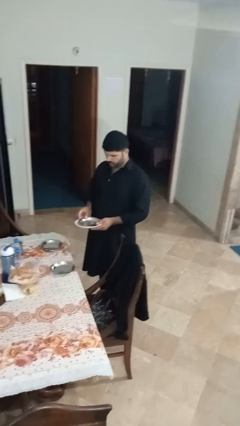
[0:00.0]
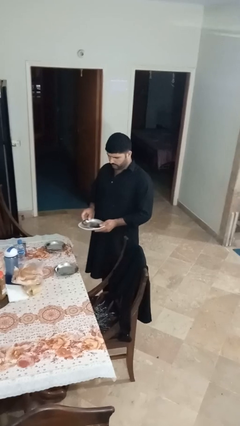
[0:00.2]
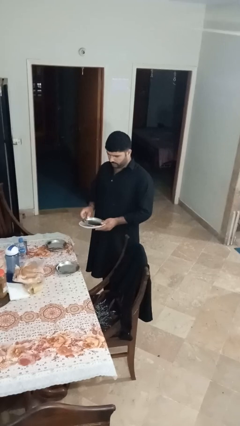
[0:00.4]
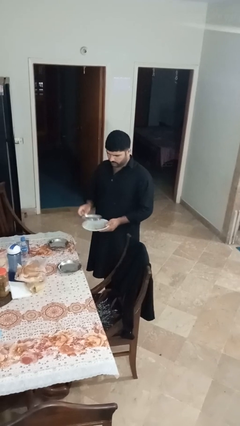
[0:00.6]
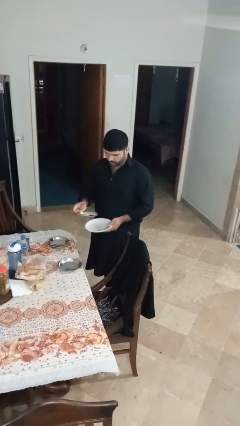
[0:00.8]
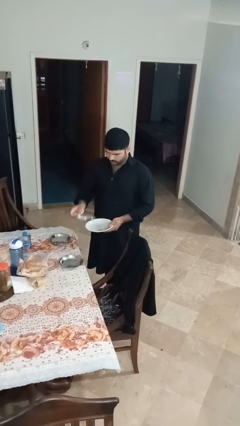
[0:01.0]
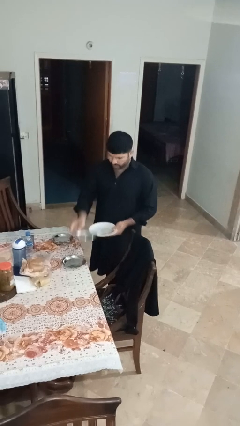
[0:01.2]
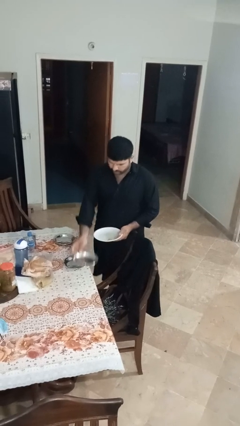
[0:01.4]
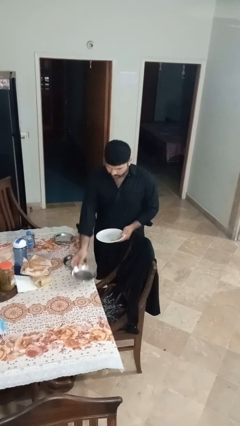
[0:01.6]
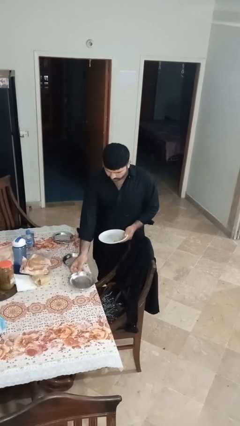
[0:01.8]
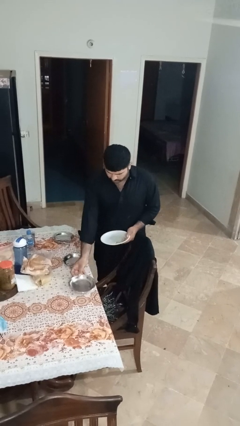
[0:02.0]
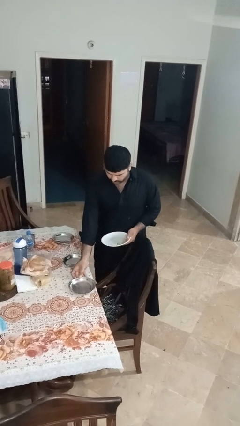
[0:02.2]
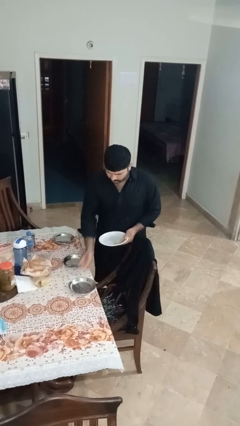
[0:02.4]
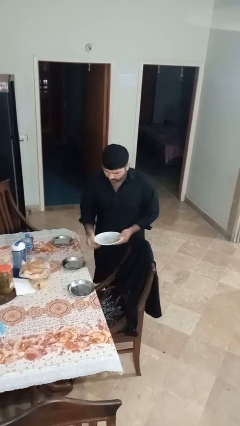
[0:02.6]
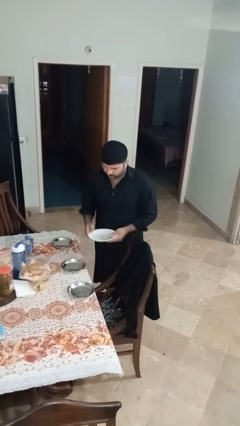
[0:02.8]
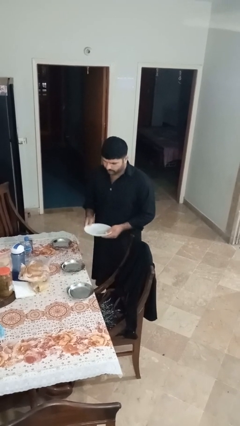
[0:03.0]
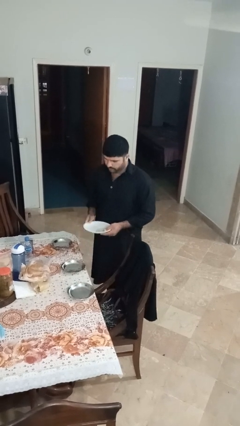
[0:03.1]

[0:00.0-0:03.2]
person sets table

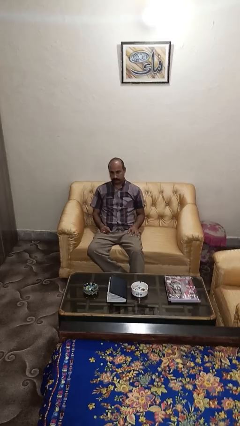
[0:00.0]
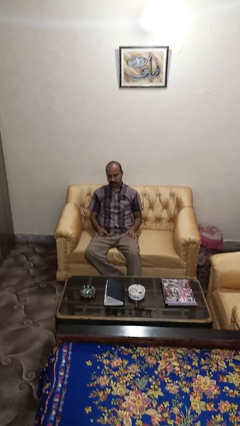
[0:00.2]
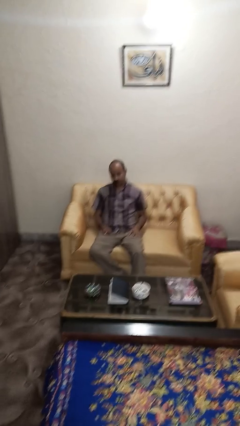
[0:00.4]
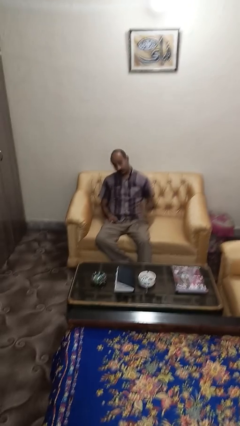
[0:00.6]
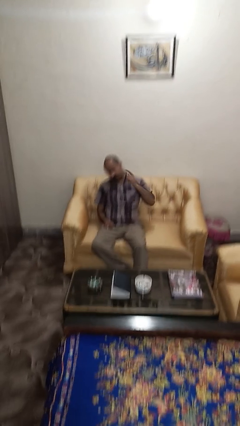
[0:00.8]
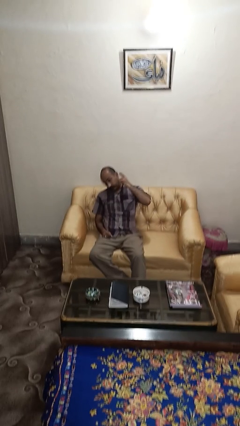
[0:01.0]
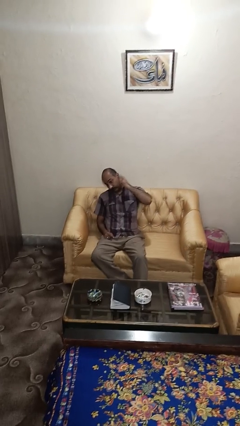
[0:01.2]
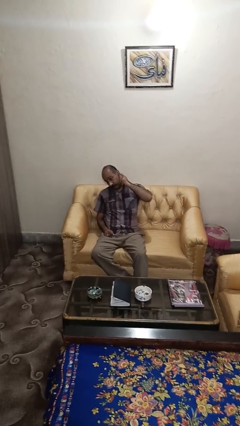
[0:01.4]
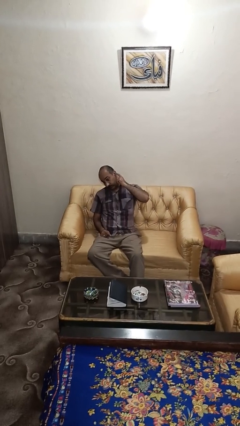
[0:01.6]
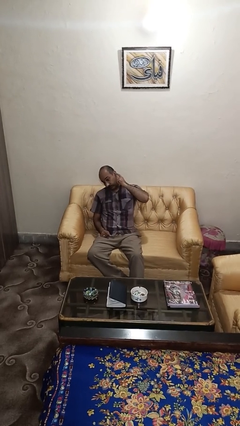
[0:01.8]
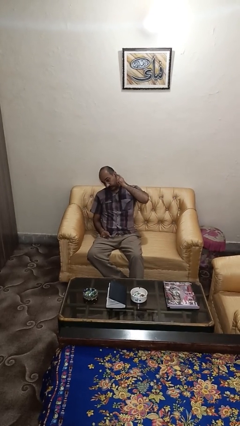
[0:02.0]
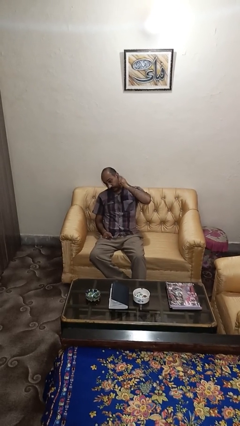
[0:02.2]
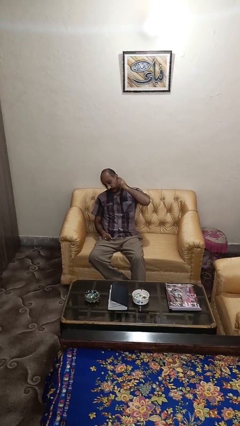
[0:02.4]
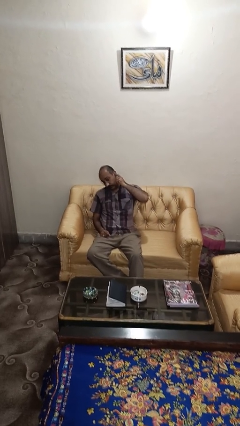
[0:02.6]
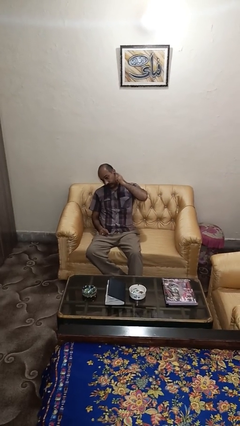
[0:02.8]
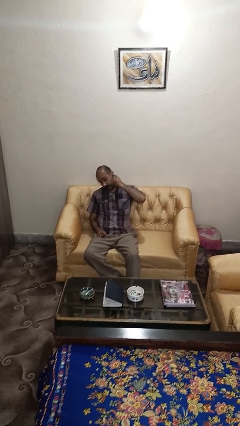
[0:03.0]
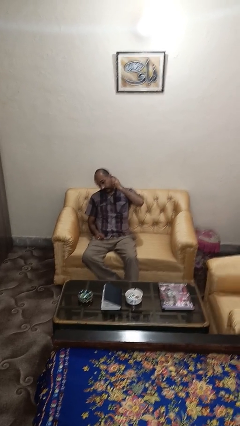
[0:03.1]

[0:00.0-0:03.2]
person gestures listen closely

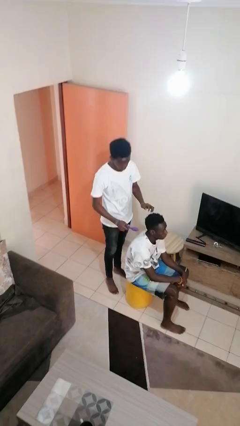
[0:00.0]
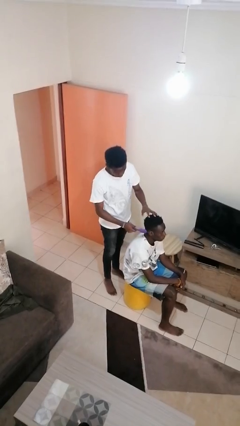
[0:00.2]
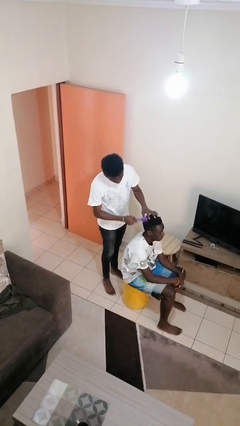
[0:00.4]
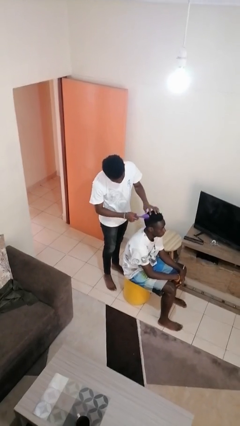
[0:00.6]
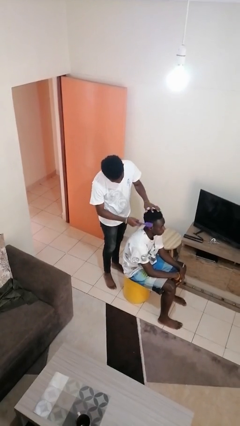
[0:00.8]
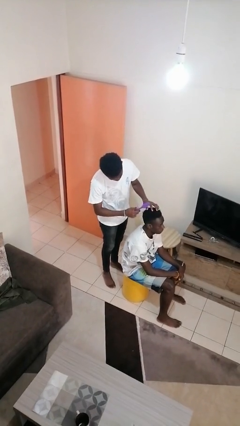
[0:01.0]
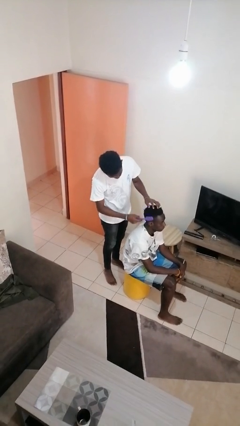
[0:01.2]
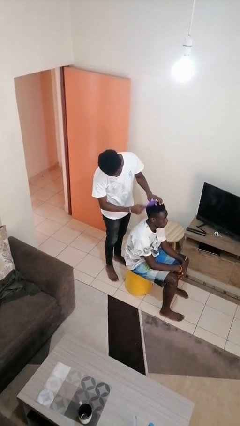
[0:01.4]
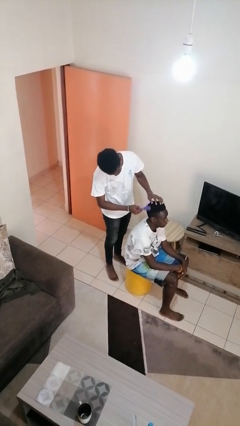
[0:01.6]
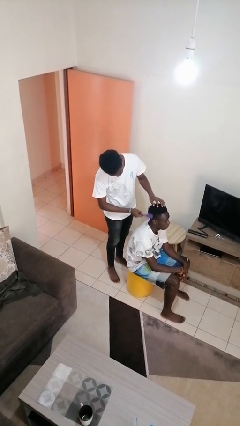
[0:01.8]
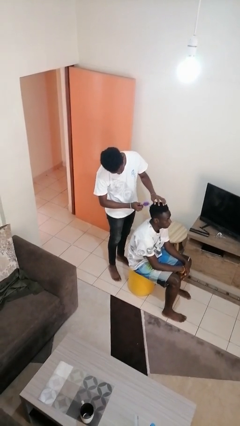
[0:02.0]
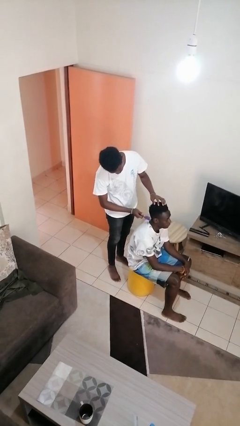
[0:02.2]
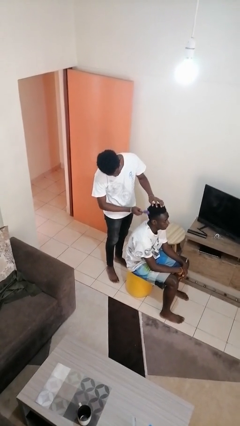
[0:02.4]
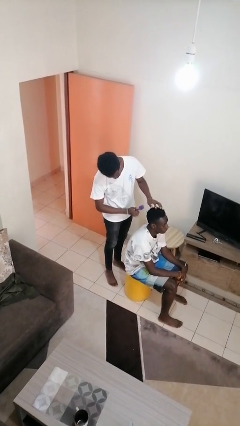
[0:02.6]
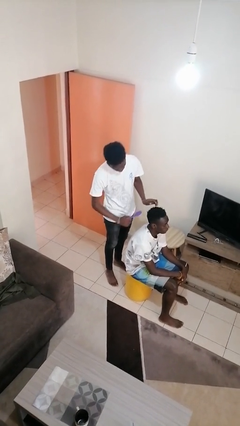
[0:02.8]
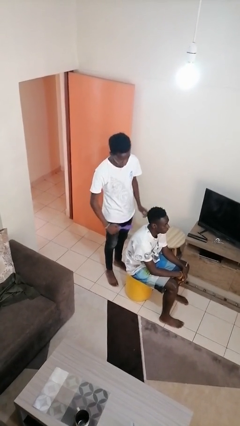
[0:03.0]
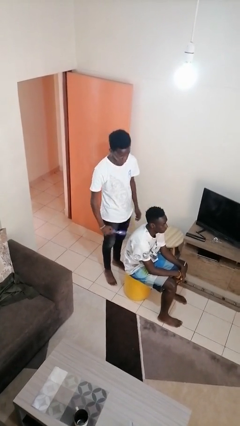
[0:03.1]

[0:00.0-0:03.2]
person brushes hair of person

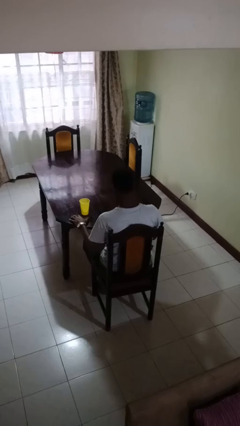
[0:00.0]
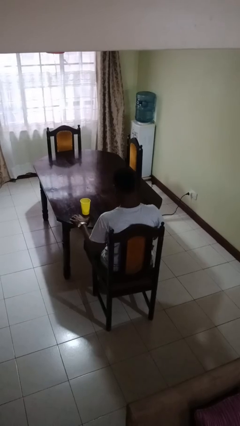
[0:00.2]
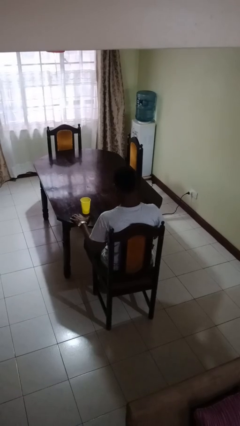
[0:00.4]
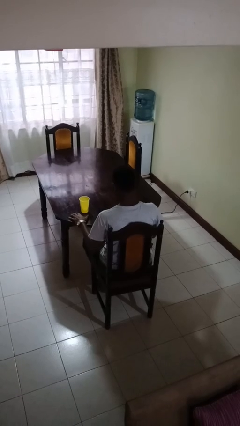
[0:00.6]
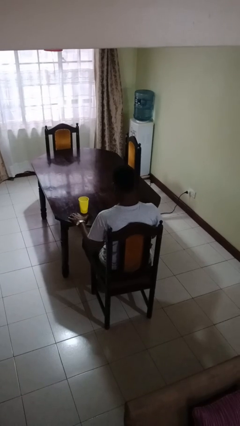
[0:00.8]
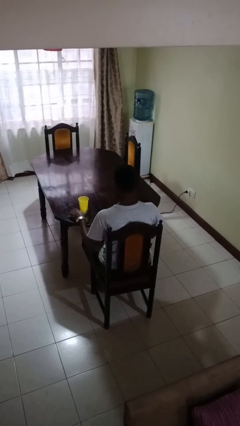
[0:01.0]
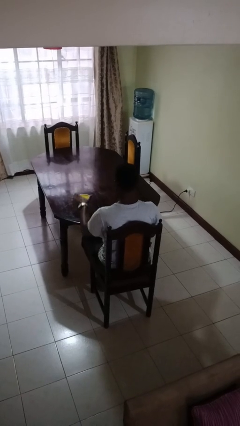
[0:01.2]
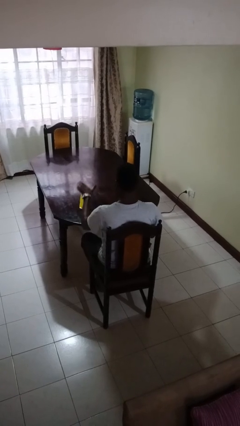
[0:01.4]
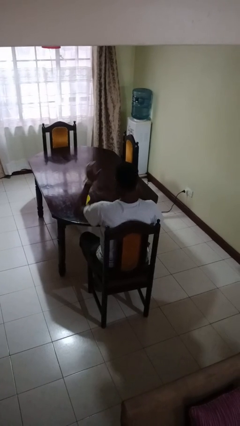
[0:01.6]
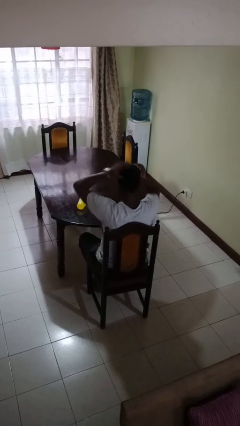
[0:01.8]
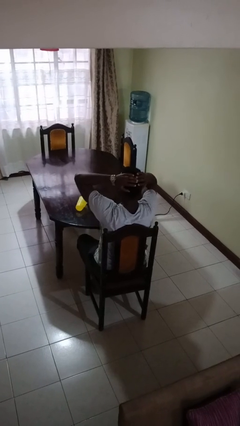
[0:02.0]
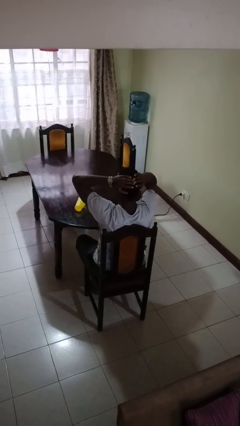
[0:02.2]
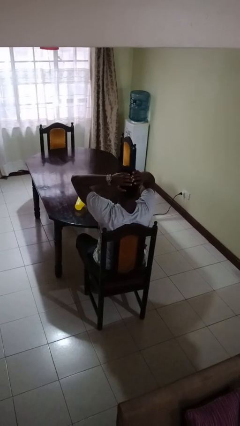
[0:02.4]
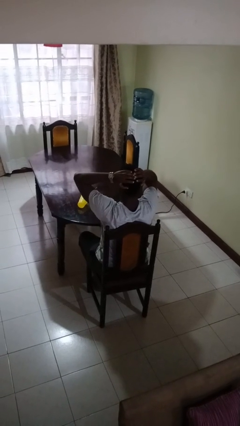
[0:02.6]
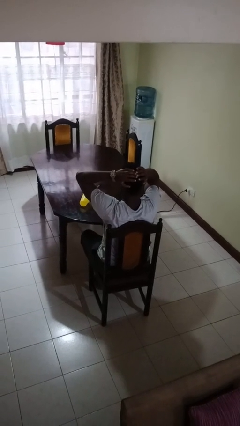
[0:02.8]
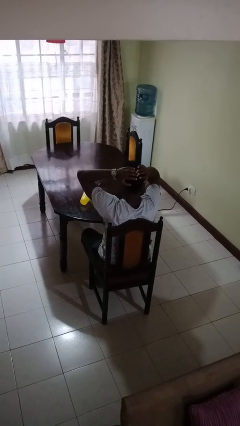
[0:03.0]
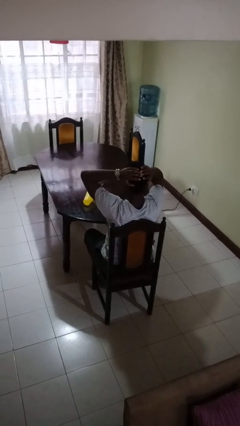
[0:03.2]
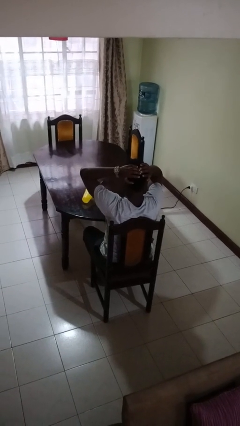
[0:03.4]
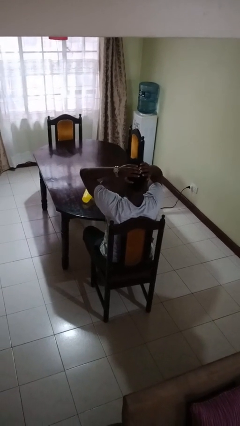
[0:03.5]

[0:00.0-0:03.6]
person spills on table

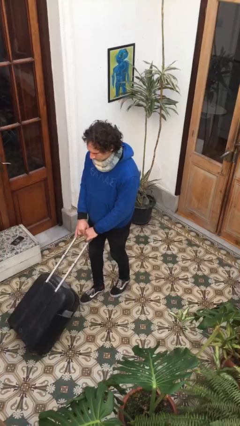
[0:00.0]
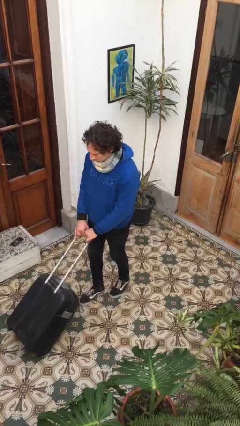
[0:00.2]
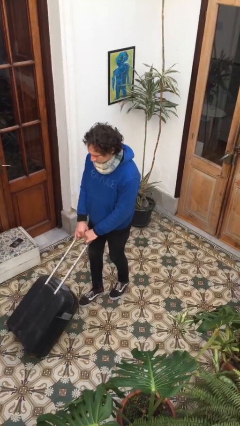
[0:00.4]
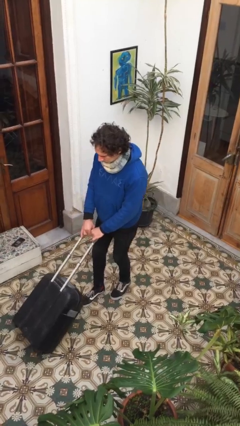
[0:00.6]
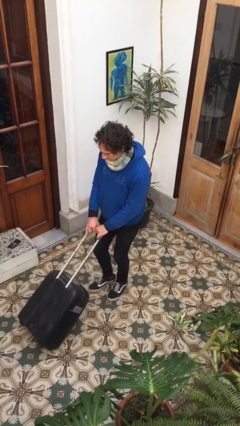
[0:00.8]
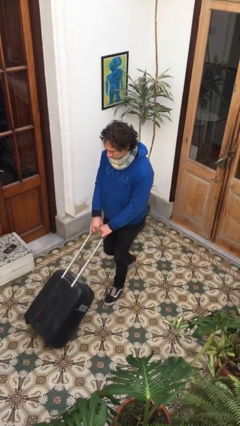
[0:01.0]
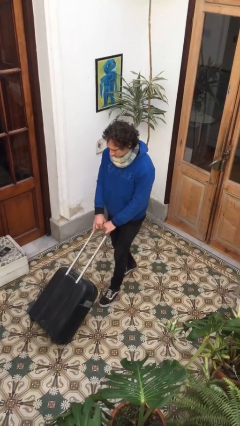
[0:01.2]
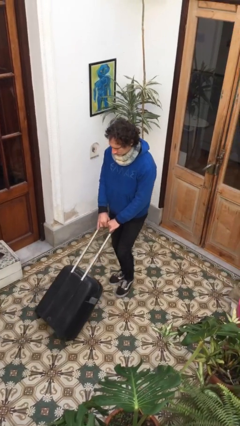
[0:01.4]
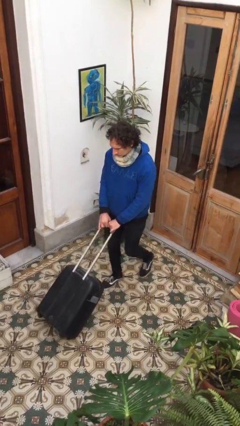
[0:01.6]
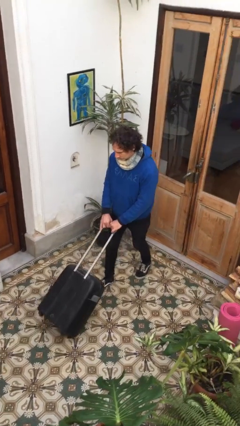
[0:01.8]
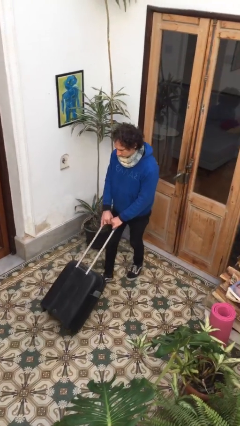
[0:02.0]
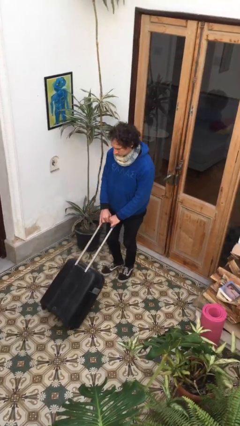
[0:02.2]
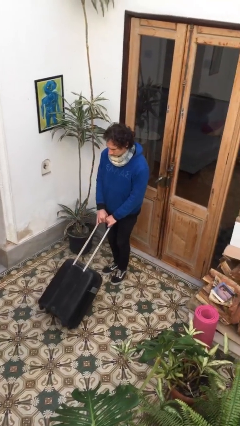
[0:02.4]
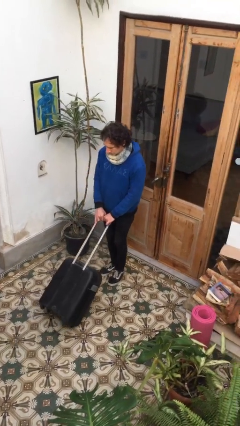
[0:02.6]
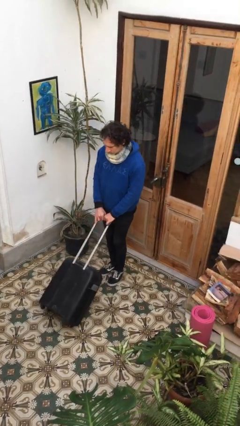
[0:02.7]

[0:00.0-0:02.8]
person pulls wheeled cart

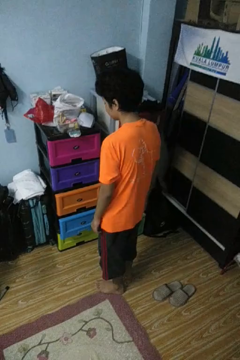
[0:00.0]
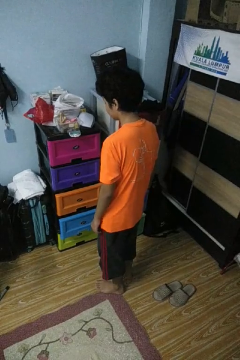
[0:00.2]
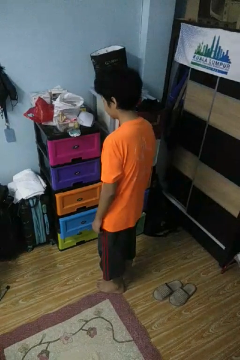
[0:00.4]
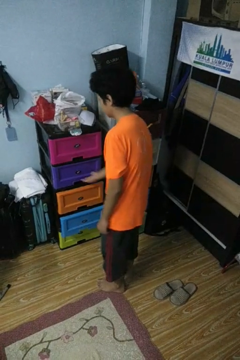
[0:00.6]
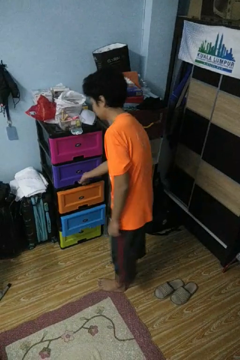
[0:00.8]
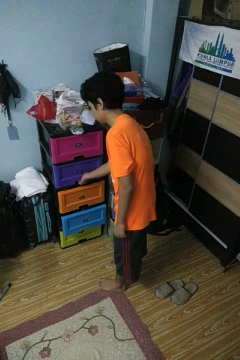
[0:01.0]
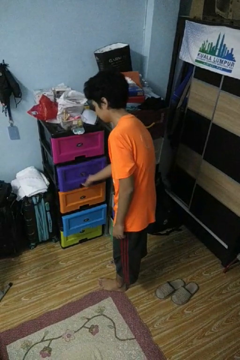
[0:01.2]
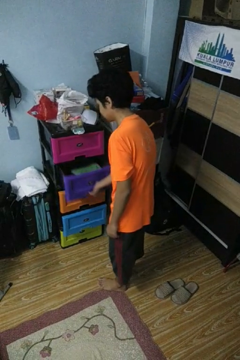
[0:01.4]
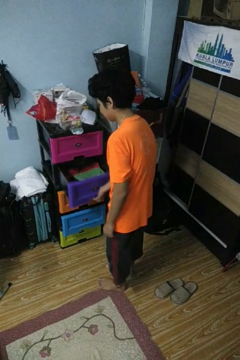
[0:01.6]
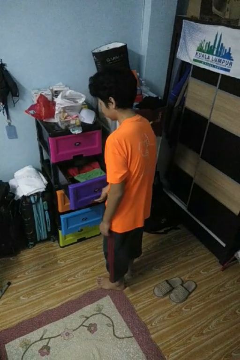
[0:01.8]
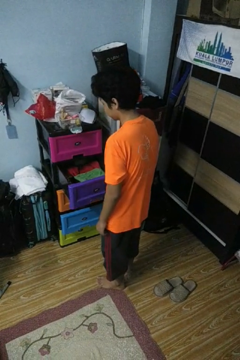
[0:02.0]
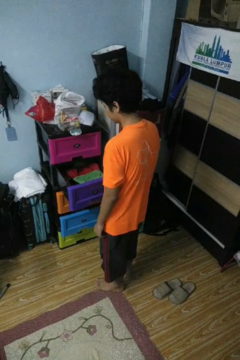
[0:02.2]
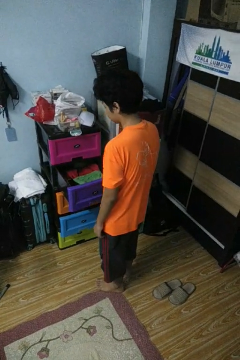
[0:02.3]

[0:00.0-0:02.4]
person opens dresser drawer
